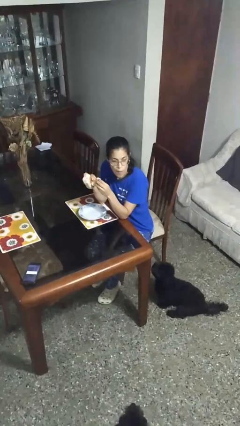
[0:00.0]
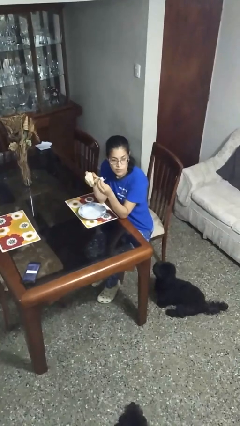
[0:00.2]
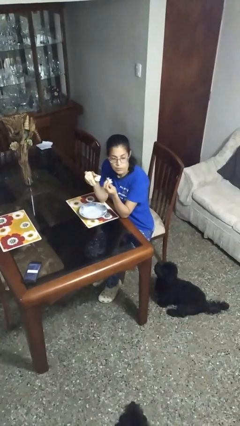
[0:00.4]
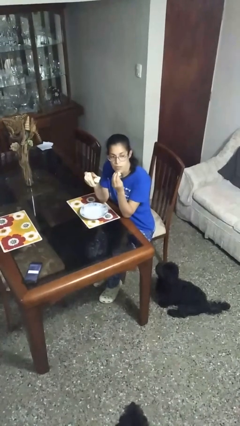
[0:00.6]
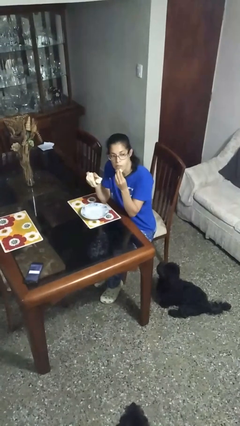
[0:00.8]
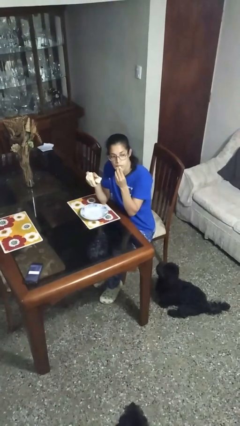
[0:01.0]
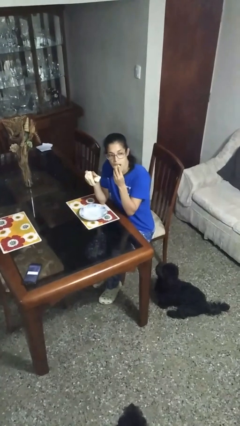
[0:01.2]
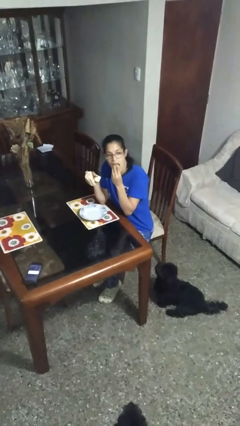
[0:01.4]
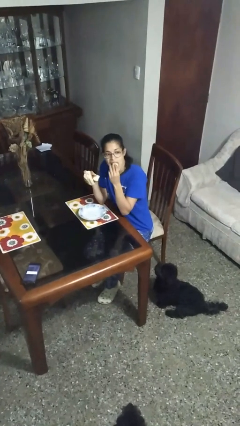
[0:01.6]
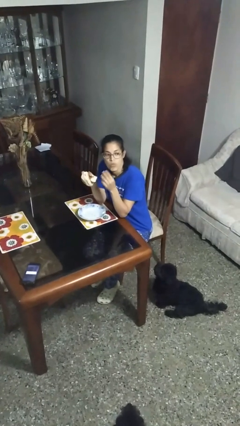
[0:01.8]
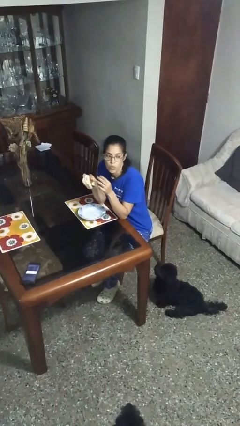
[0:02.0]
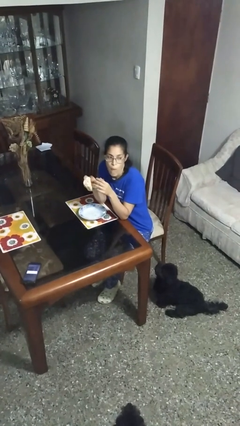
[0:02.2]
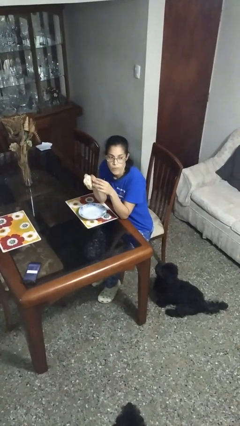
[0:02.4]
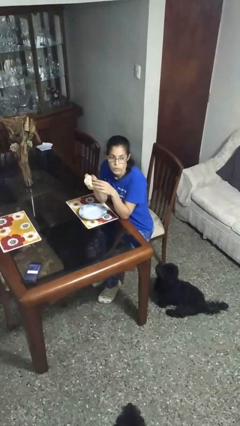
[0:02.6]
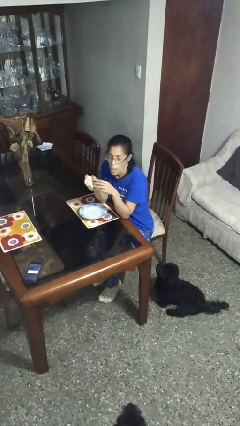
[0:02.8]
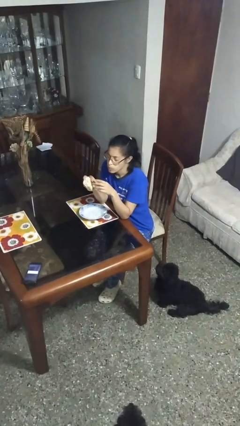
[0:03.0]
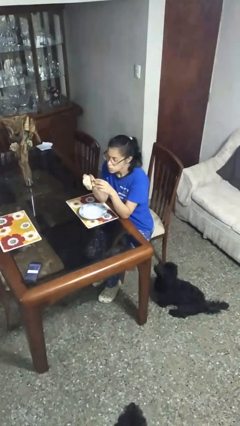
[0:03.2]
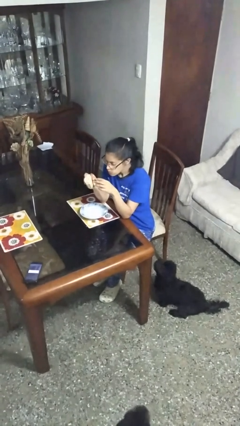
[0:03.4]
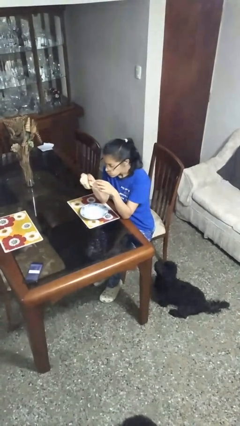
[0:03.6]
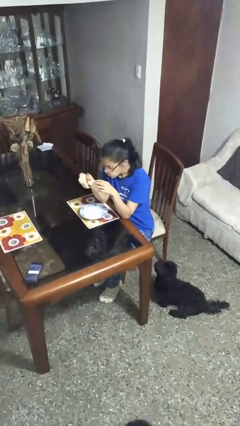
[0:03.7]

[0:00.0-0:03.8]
person eats with hands

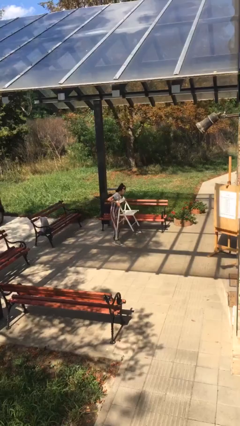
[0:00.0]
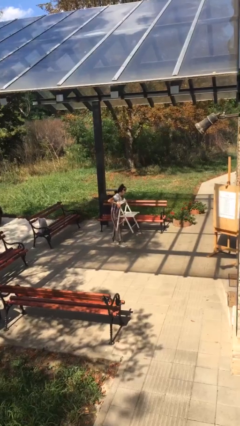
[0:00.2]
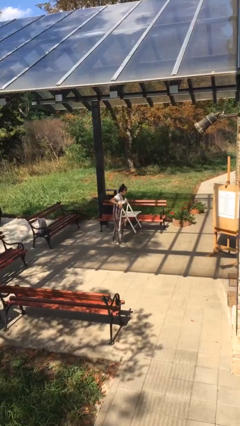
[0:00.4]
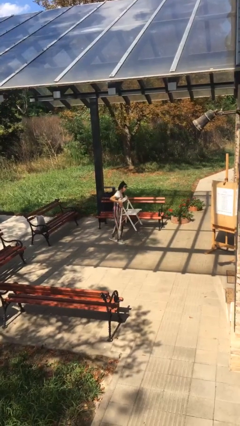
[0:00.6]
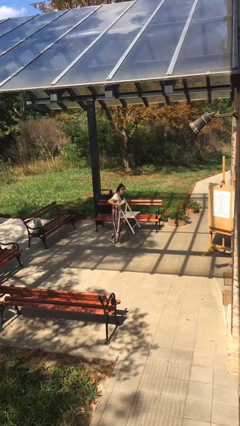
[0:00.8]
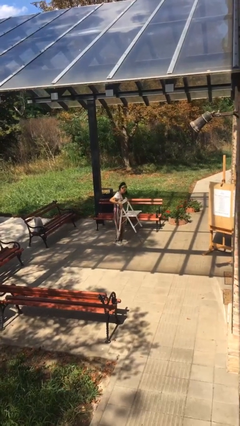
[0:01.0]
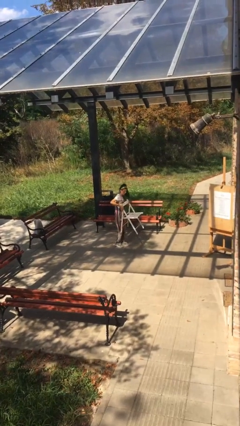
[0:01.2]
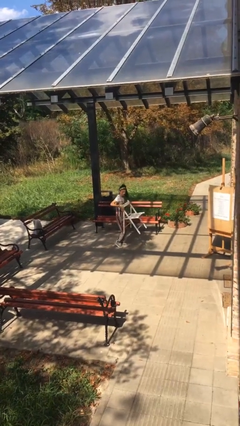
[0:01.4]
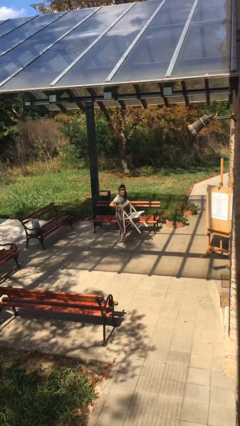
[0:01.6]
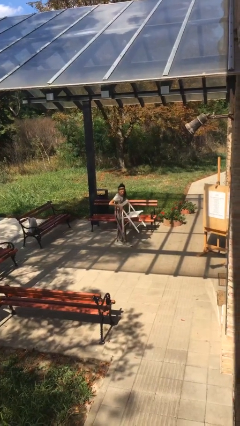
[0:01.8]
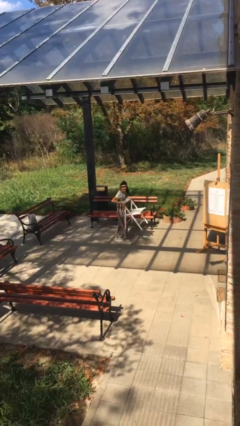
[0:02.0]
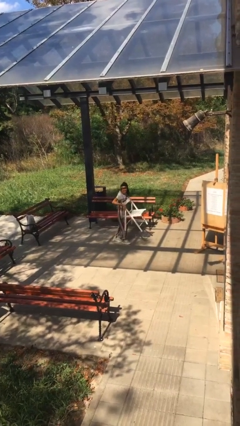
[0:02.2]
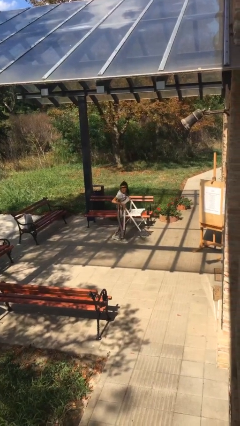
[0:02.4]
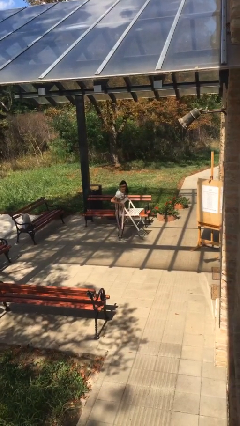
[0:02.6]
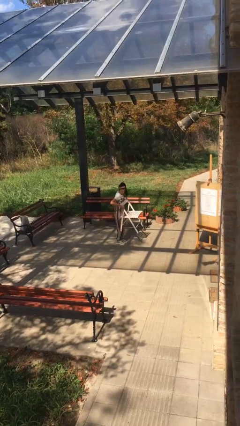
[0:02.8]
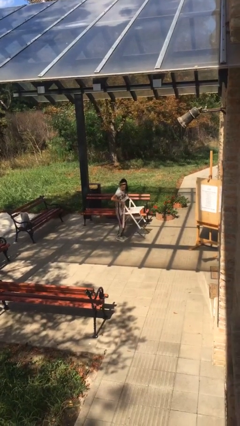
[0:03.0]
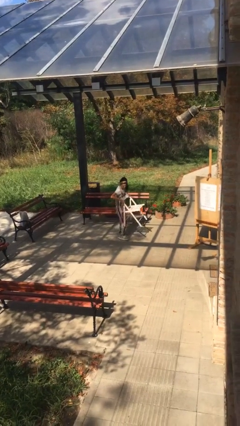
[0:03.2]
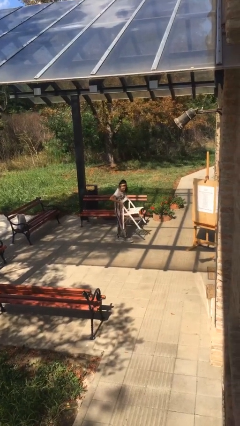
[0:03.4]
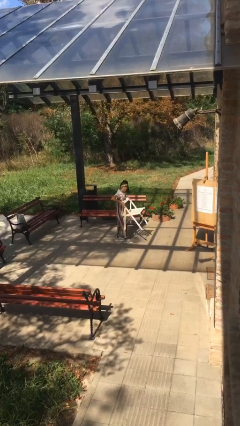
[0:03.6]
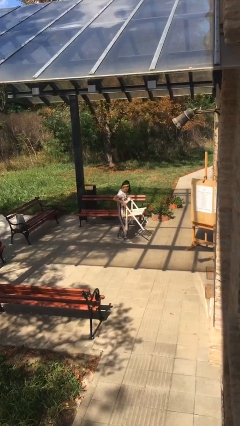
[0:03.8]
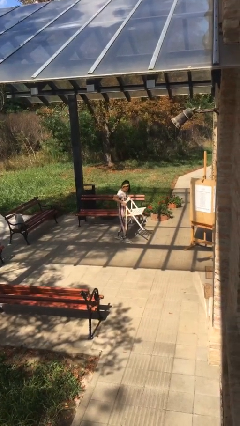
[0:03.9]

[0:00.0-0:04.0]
person carries heavy object

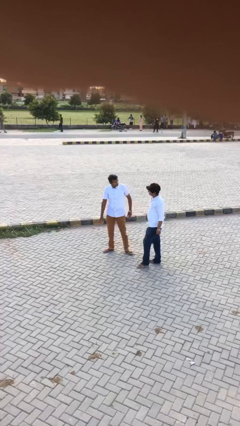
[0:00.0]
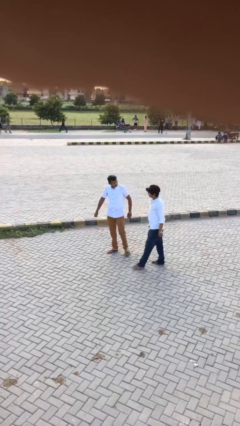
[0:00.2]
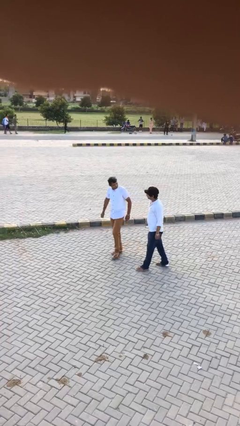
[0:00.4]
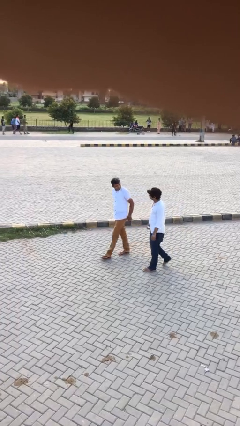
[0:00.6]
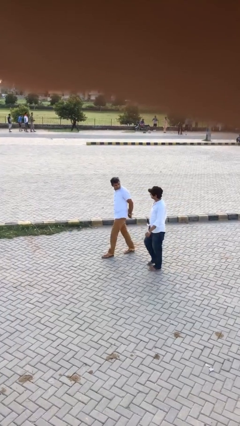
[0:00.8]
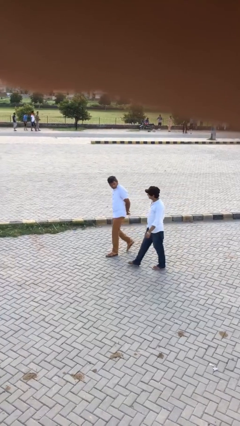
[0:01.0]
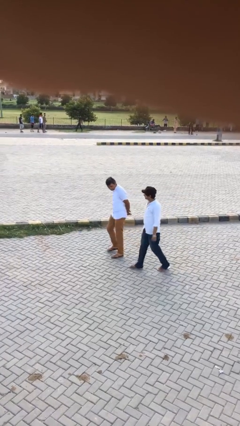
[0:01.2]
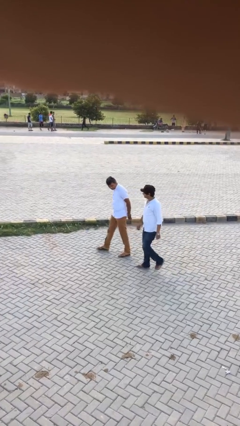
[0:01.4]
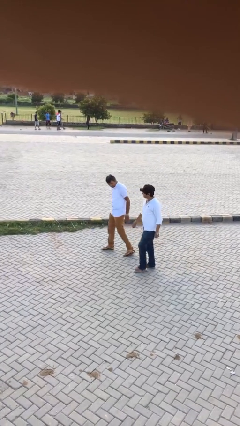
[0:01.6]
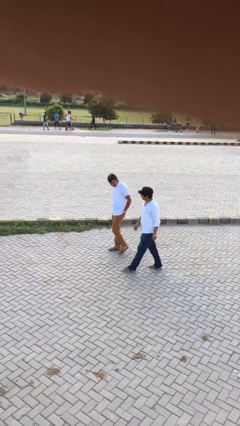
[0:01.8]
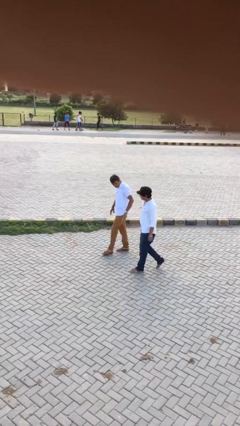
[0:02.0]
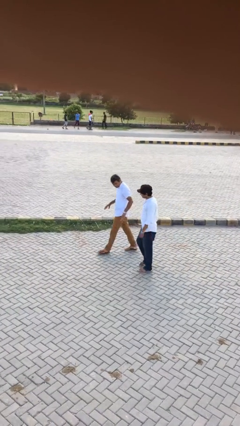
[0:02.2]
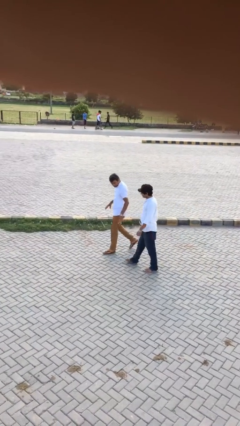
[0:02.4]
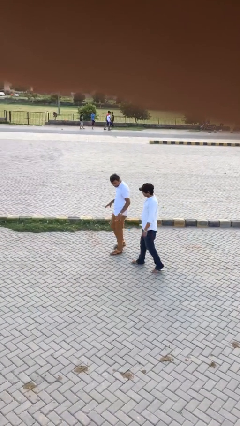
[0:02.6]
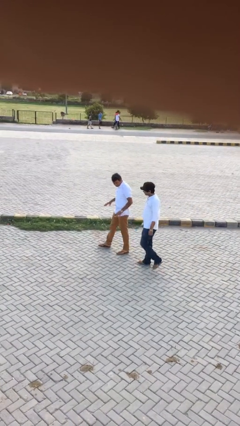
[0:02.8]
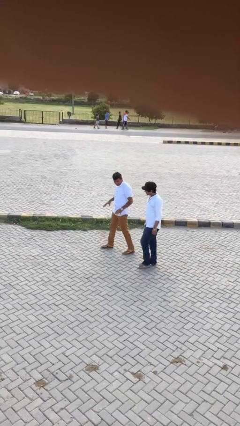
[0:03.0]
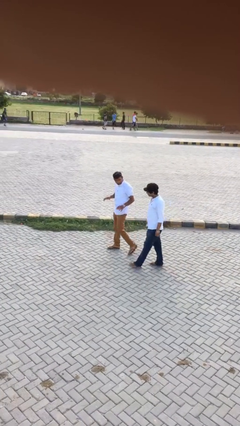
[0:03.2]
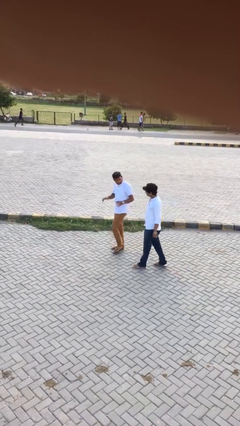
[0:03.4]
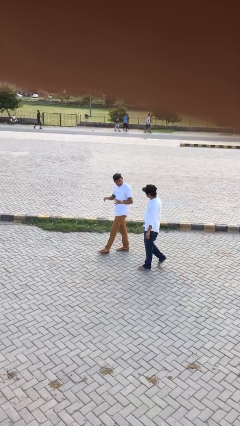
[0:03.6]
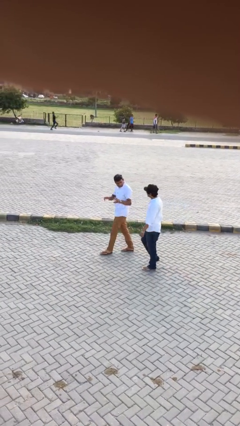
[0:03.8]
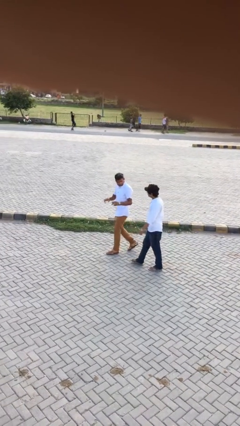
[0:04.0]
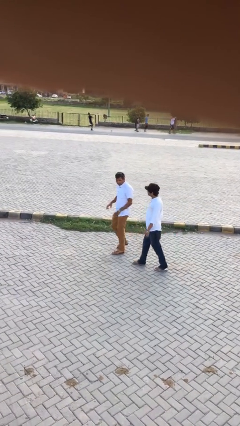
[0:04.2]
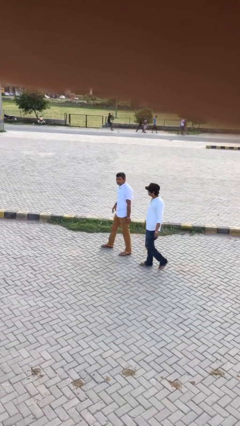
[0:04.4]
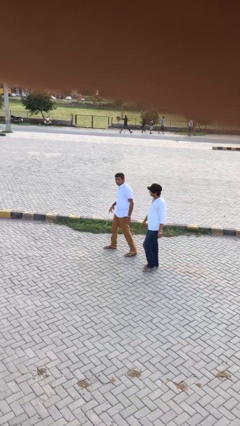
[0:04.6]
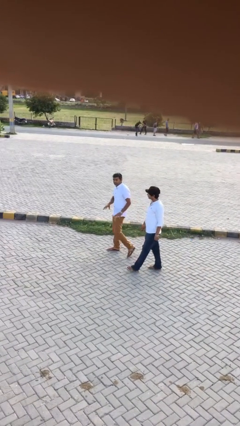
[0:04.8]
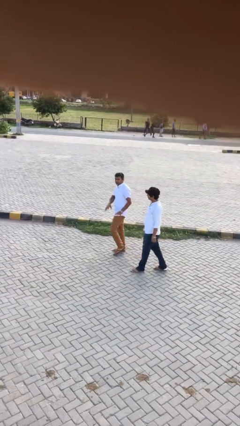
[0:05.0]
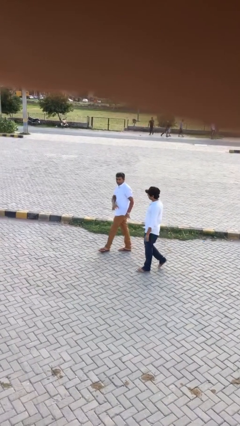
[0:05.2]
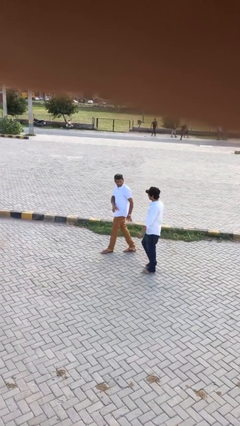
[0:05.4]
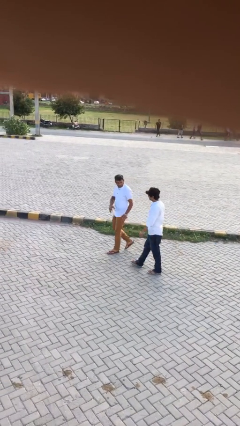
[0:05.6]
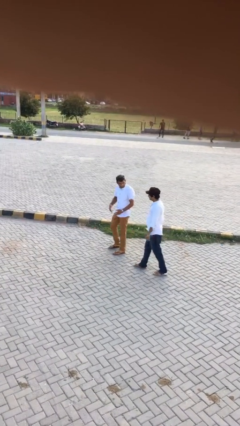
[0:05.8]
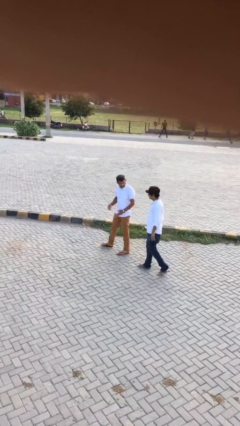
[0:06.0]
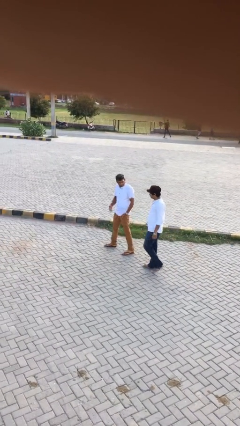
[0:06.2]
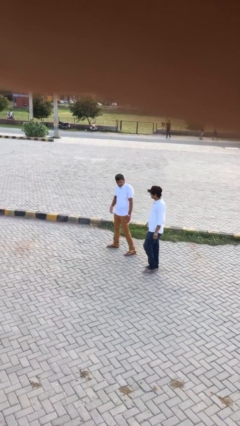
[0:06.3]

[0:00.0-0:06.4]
person talks to person

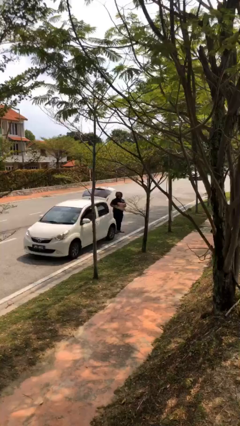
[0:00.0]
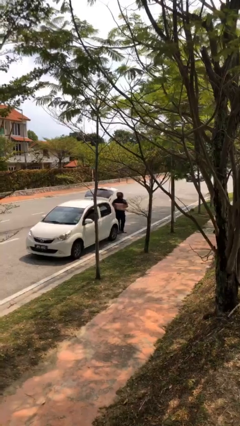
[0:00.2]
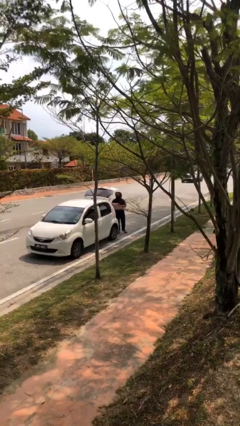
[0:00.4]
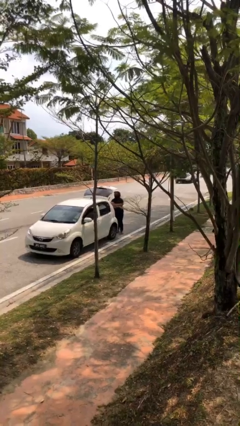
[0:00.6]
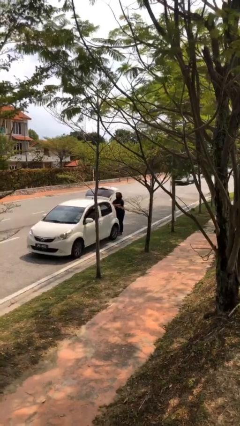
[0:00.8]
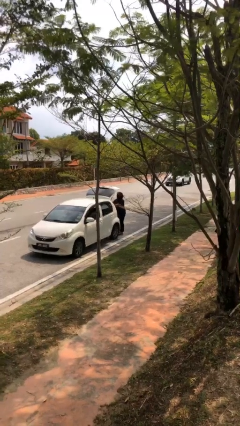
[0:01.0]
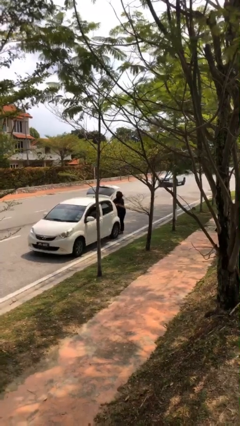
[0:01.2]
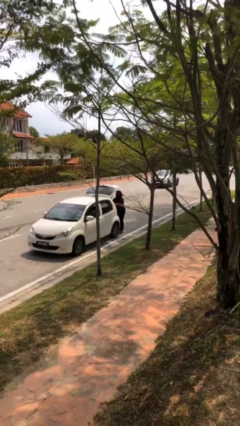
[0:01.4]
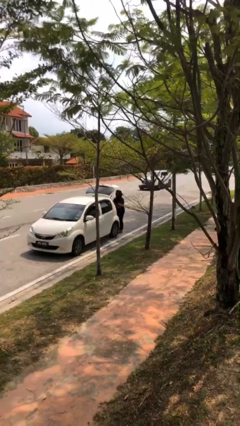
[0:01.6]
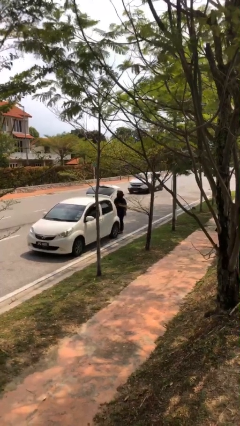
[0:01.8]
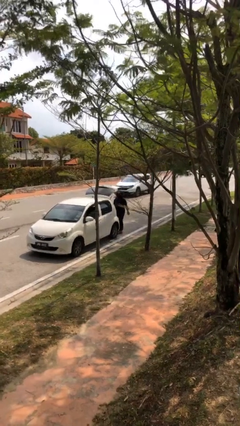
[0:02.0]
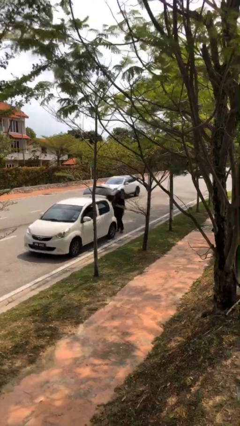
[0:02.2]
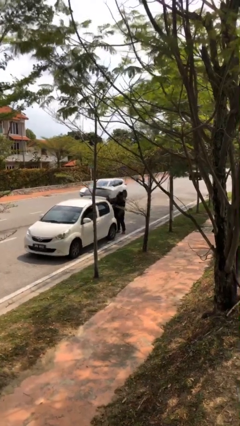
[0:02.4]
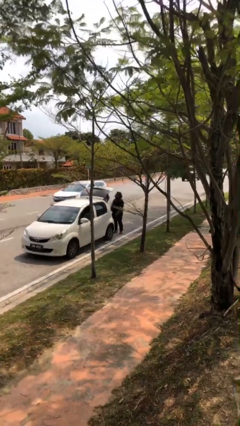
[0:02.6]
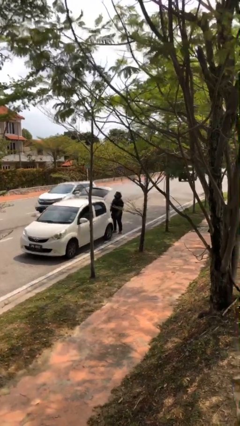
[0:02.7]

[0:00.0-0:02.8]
person loads car

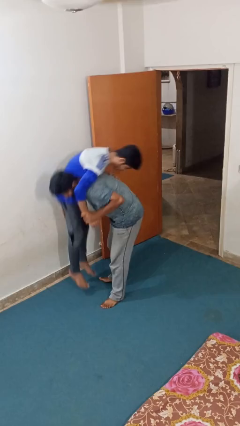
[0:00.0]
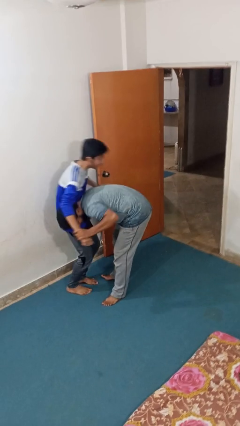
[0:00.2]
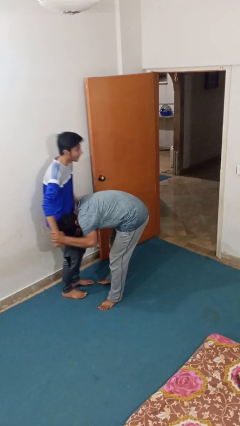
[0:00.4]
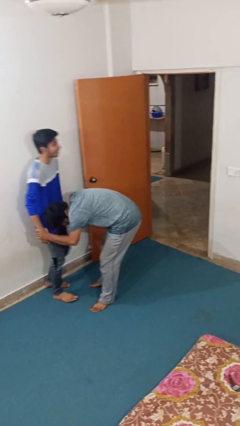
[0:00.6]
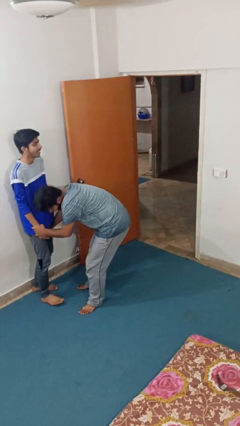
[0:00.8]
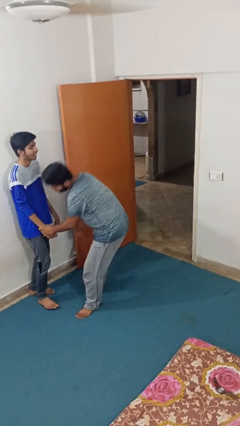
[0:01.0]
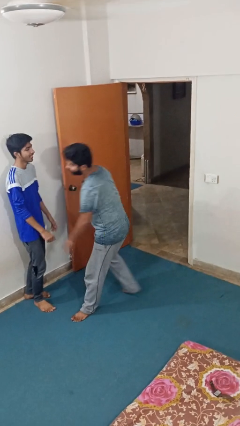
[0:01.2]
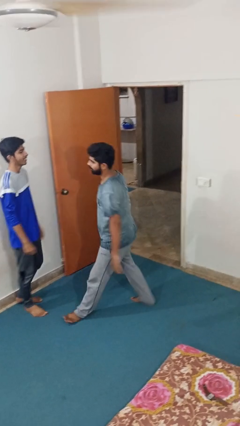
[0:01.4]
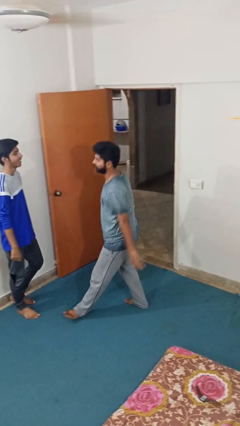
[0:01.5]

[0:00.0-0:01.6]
person puts down person
